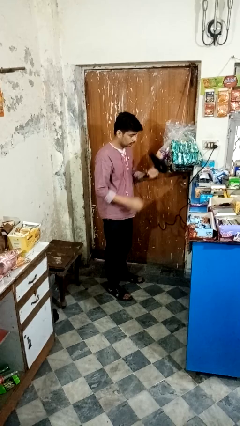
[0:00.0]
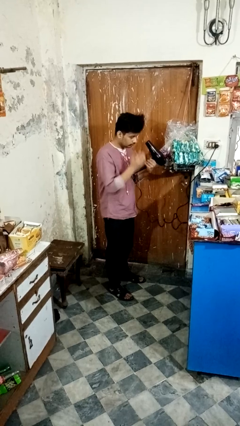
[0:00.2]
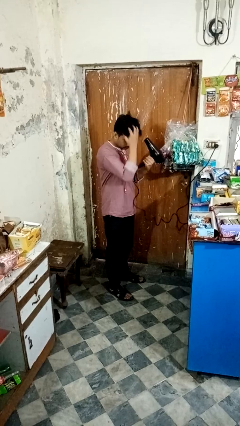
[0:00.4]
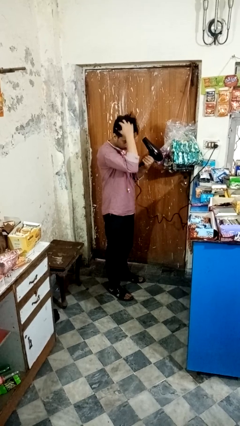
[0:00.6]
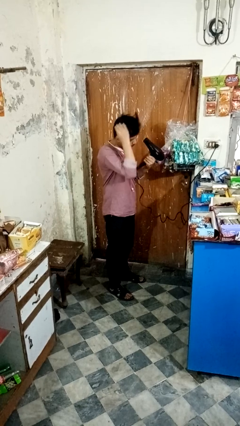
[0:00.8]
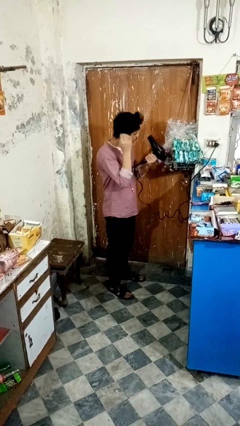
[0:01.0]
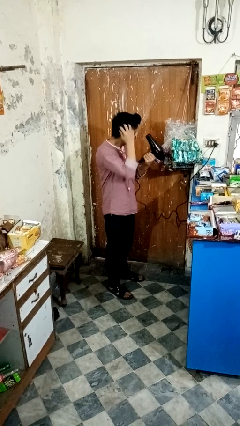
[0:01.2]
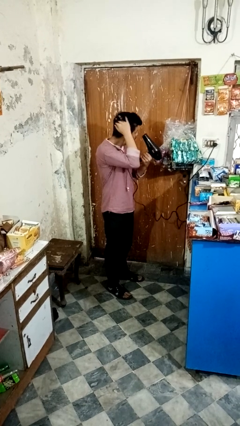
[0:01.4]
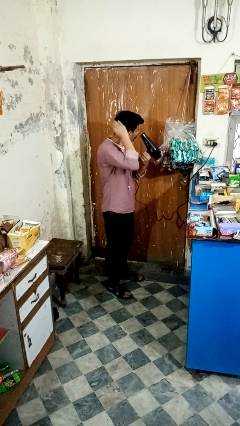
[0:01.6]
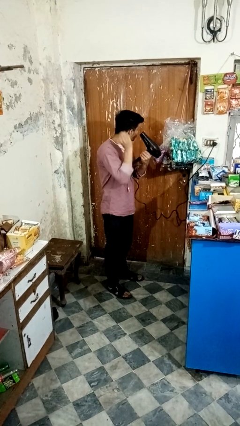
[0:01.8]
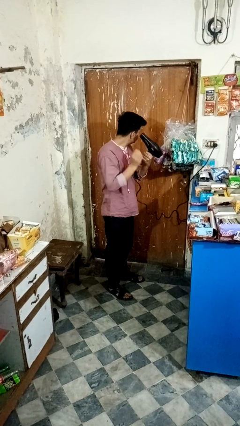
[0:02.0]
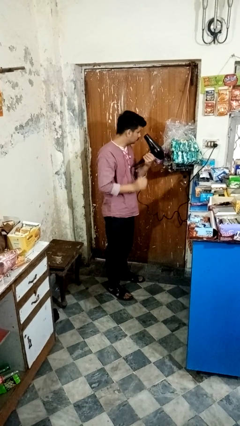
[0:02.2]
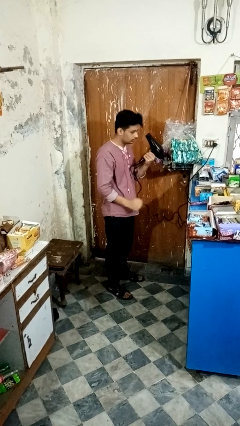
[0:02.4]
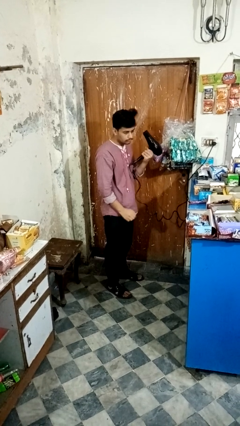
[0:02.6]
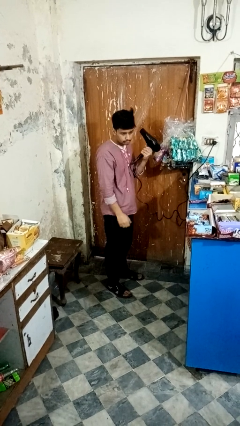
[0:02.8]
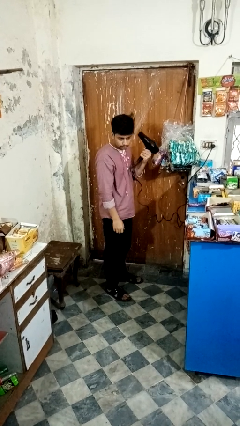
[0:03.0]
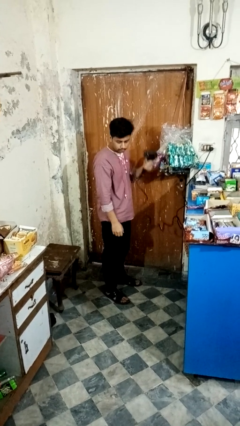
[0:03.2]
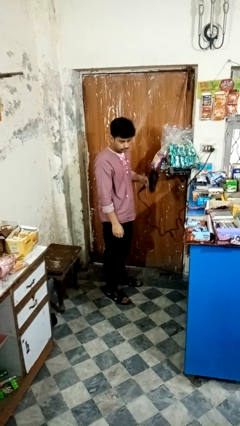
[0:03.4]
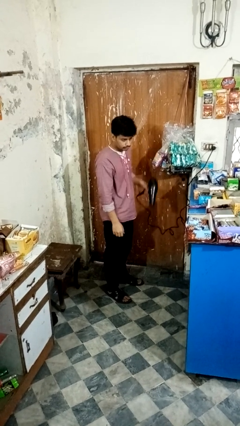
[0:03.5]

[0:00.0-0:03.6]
person dries hair with hairdryer

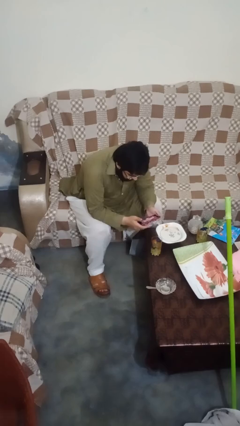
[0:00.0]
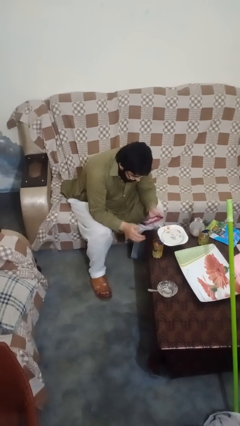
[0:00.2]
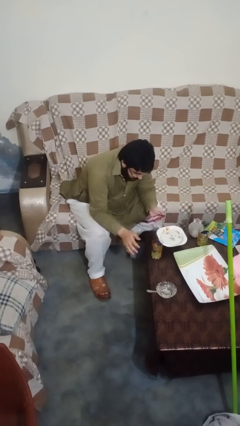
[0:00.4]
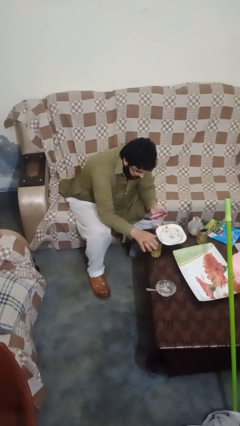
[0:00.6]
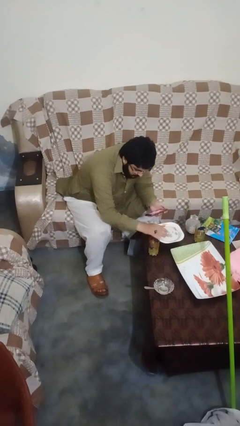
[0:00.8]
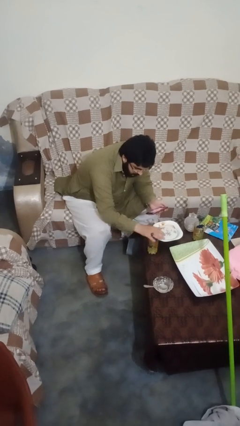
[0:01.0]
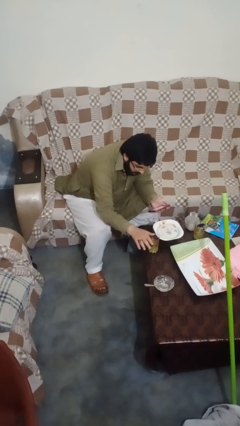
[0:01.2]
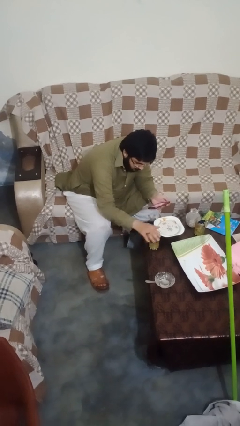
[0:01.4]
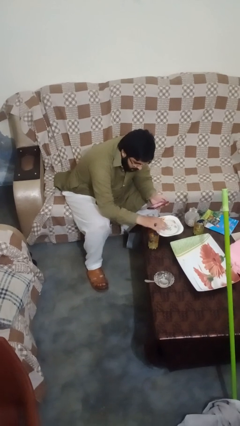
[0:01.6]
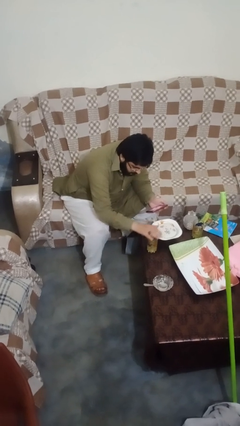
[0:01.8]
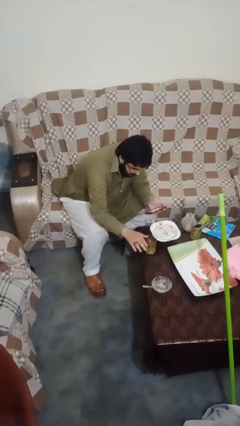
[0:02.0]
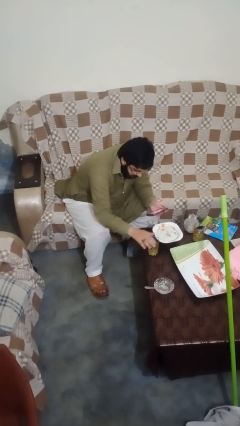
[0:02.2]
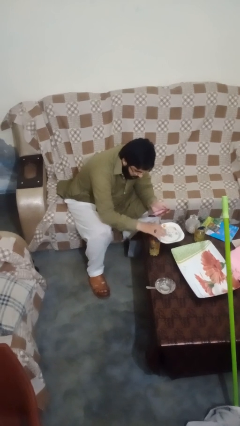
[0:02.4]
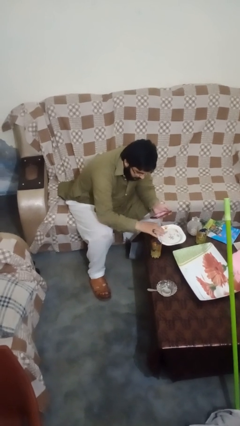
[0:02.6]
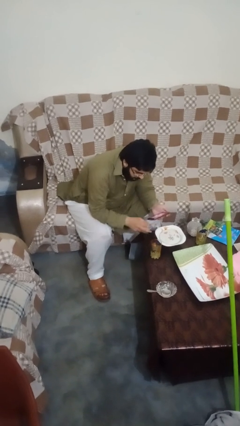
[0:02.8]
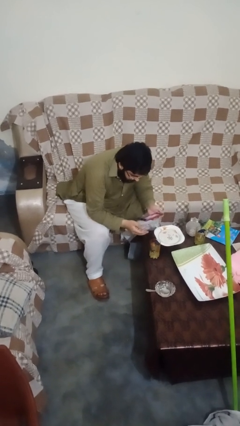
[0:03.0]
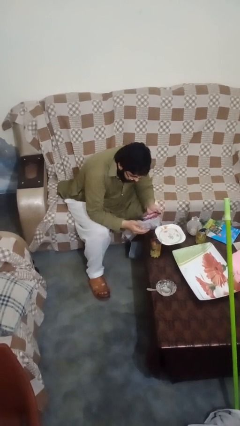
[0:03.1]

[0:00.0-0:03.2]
person waves hand over object

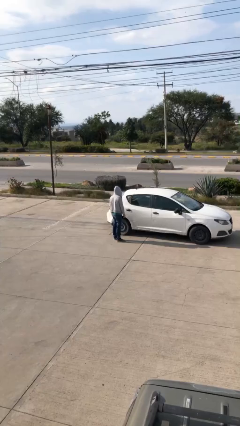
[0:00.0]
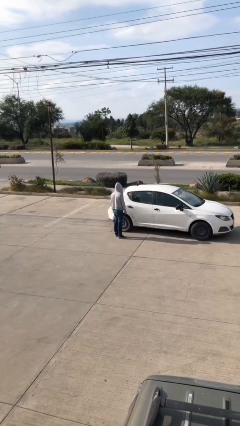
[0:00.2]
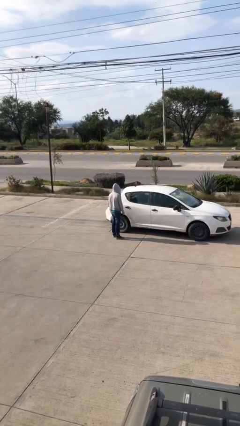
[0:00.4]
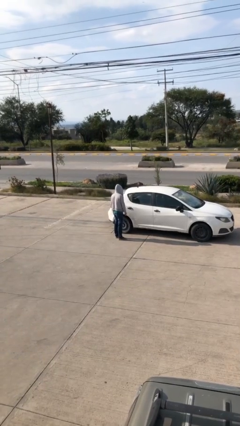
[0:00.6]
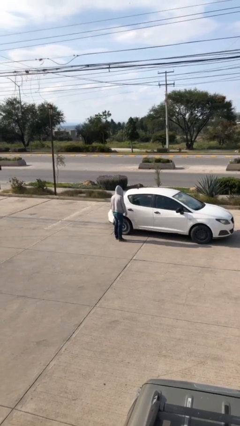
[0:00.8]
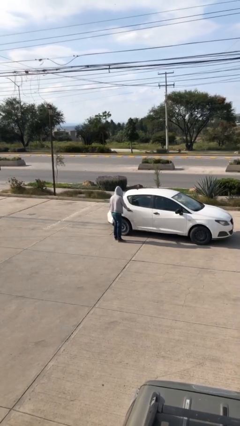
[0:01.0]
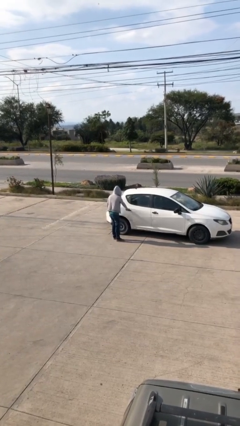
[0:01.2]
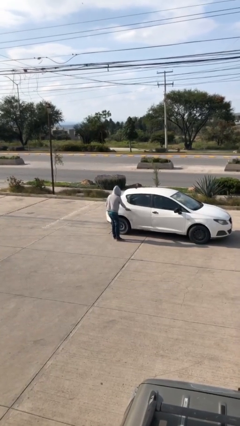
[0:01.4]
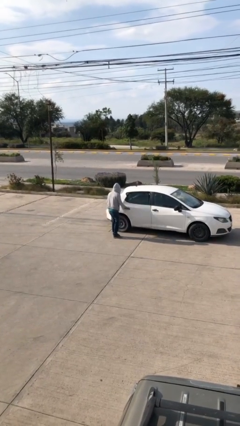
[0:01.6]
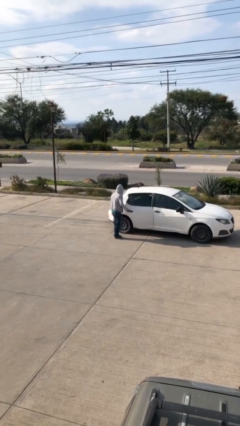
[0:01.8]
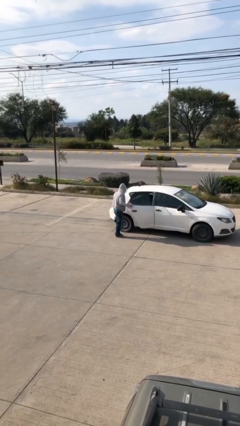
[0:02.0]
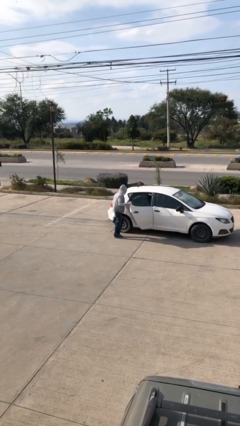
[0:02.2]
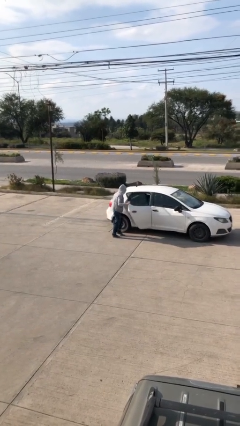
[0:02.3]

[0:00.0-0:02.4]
person opens car door

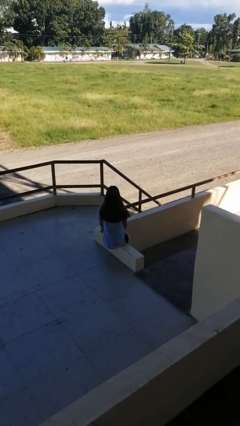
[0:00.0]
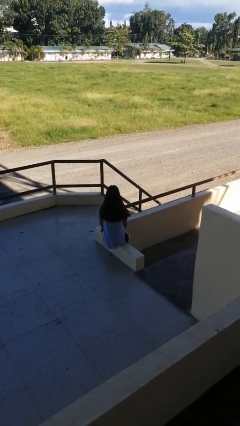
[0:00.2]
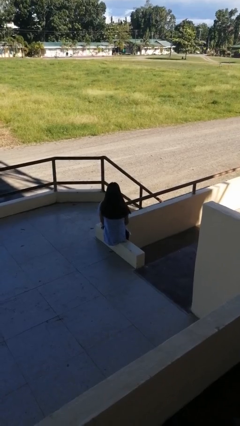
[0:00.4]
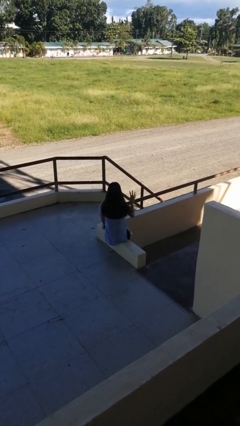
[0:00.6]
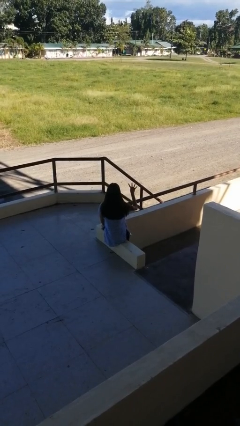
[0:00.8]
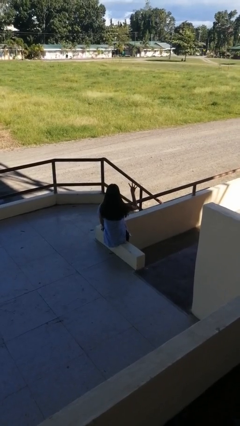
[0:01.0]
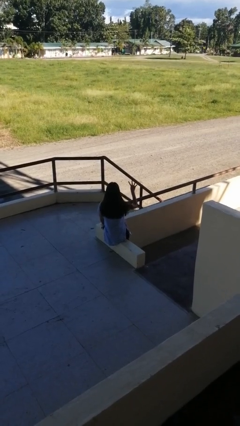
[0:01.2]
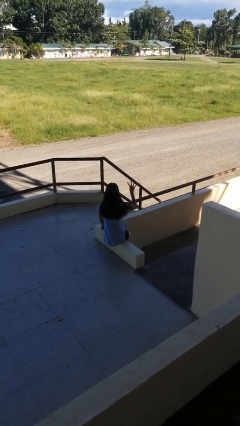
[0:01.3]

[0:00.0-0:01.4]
person gestures number four

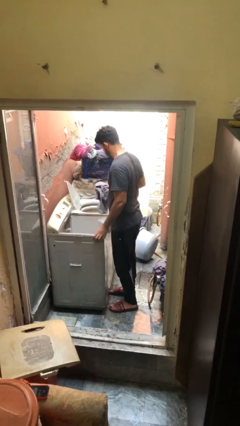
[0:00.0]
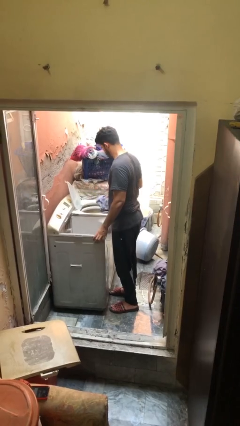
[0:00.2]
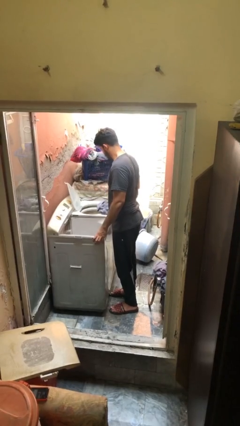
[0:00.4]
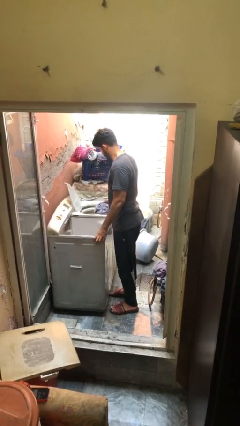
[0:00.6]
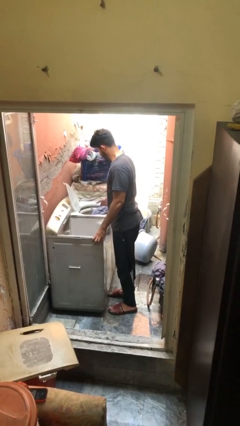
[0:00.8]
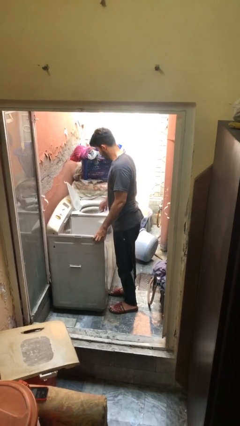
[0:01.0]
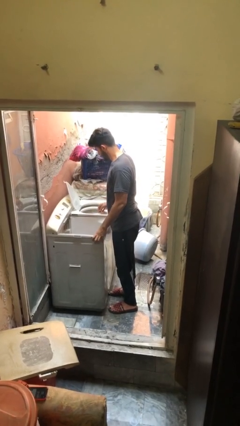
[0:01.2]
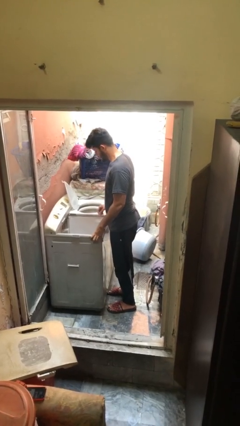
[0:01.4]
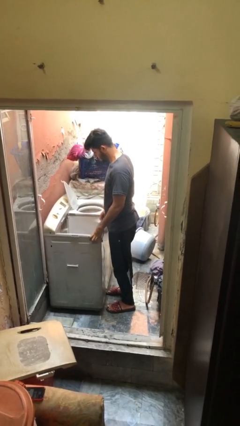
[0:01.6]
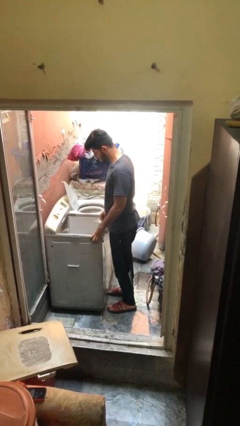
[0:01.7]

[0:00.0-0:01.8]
person loads dryer

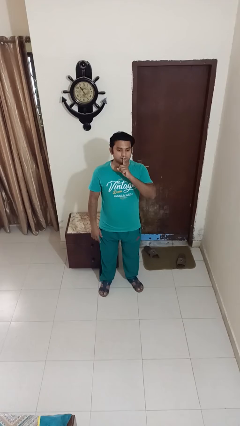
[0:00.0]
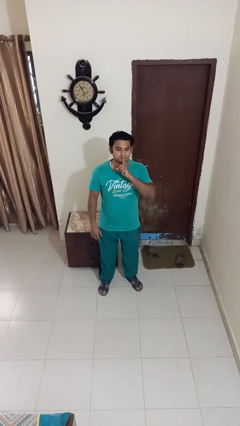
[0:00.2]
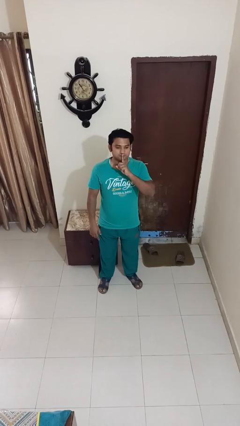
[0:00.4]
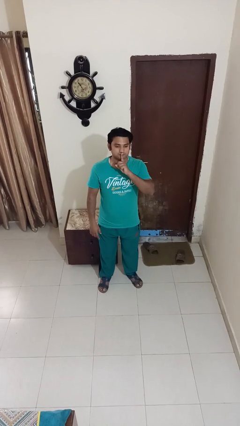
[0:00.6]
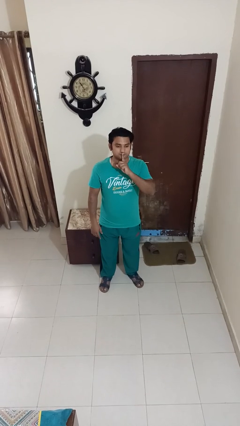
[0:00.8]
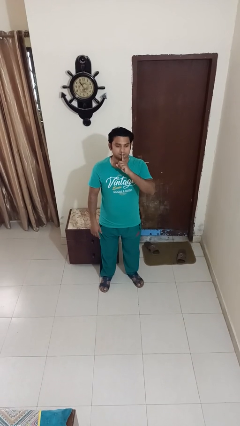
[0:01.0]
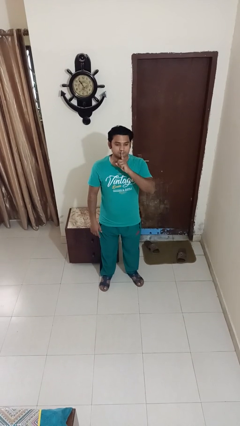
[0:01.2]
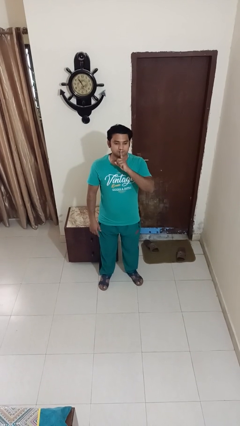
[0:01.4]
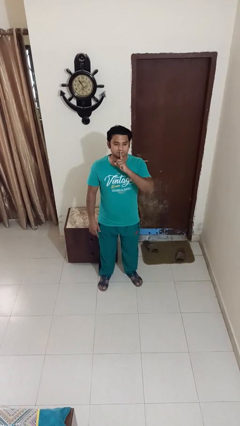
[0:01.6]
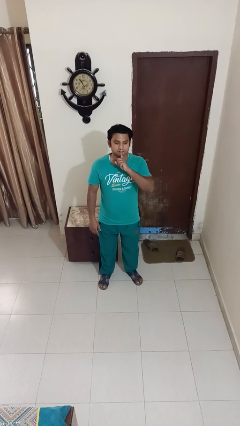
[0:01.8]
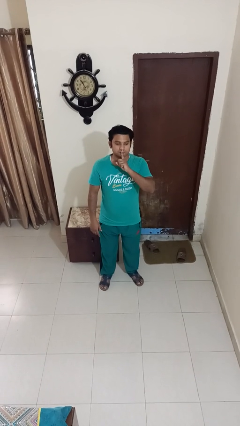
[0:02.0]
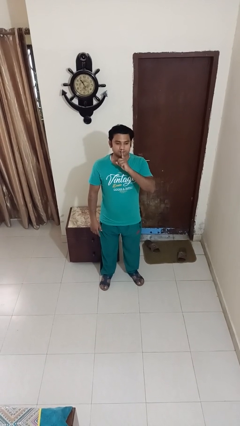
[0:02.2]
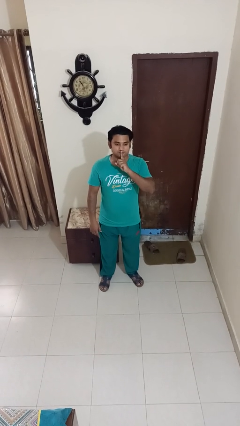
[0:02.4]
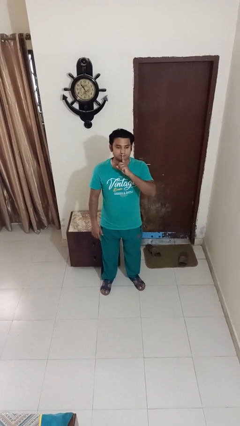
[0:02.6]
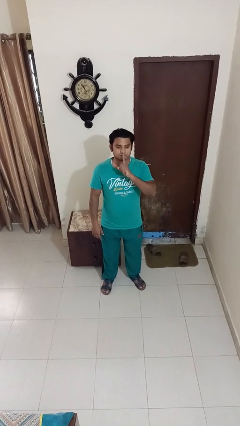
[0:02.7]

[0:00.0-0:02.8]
person gestures be quiet

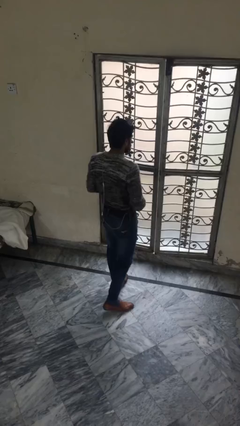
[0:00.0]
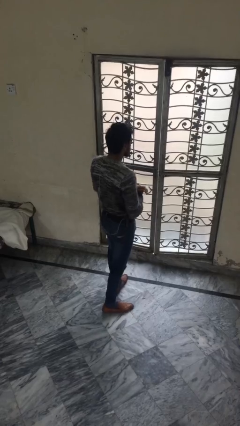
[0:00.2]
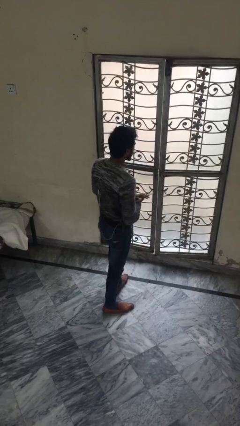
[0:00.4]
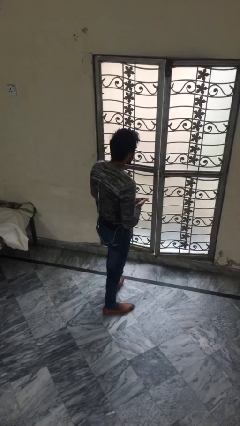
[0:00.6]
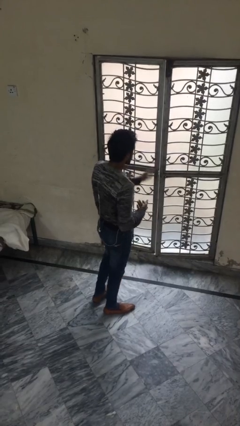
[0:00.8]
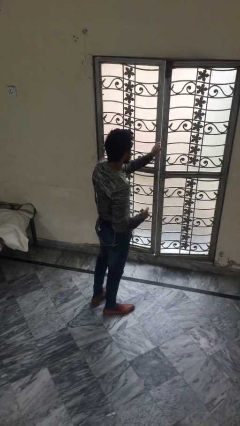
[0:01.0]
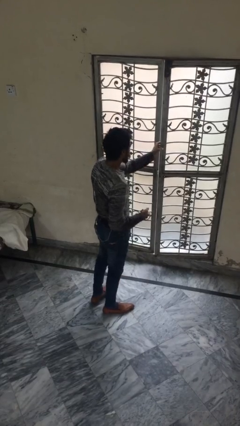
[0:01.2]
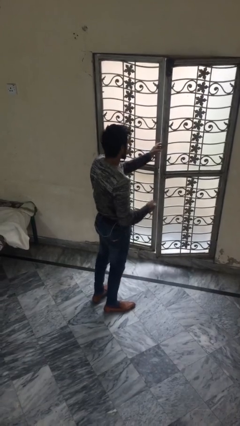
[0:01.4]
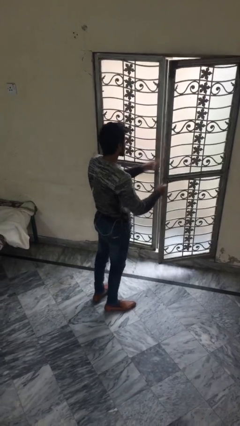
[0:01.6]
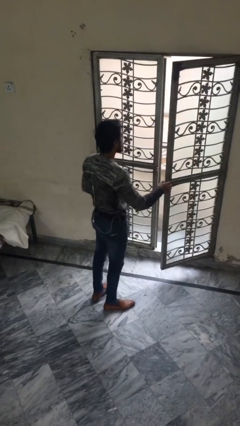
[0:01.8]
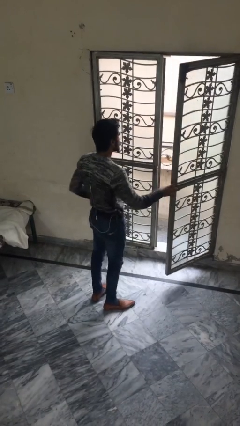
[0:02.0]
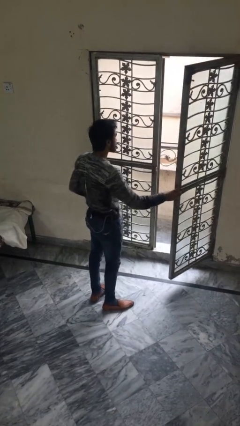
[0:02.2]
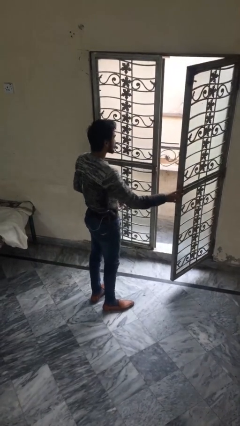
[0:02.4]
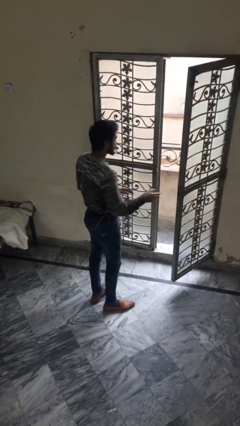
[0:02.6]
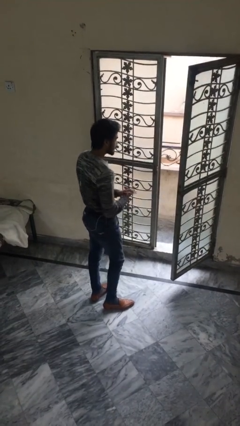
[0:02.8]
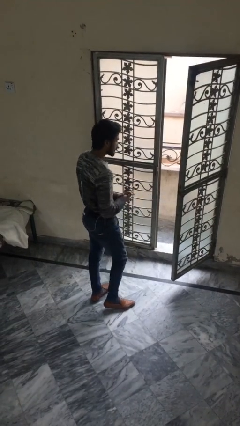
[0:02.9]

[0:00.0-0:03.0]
person opens facility door
